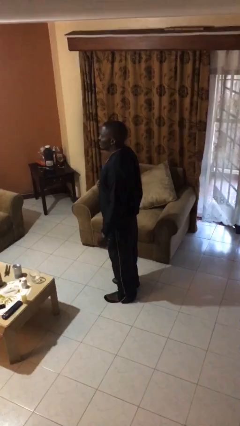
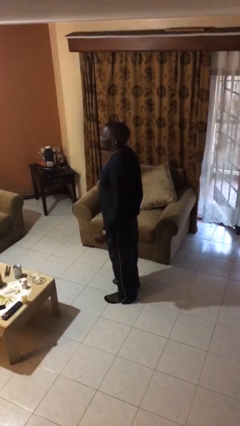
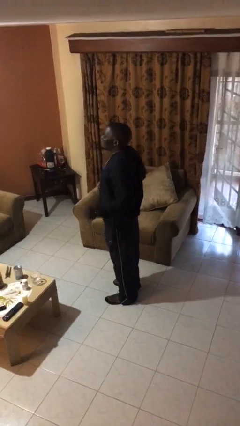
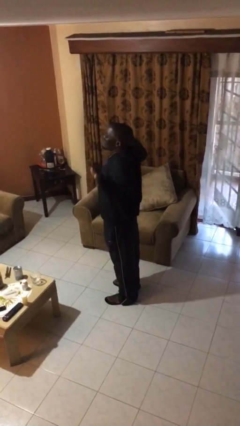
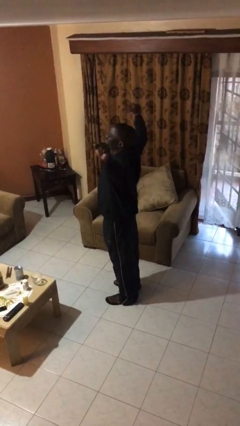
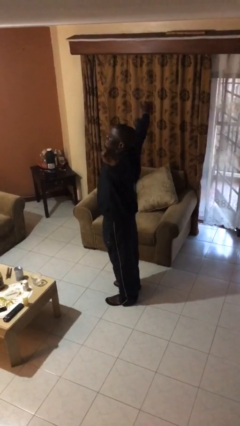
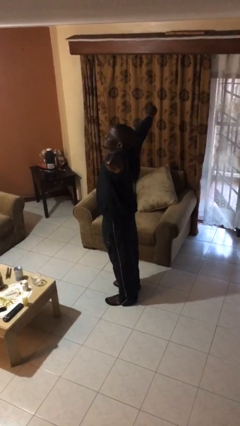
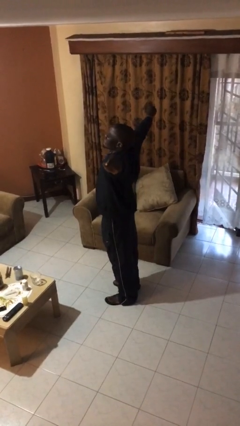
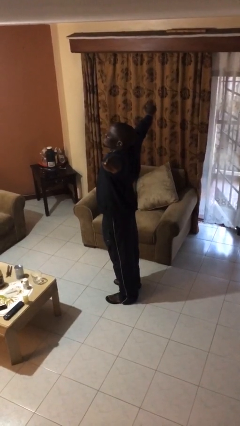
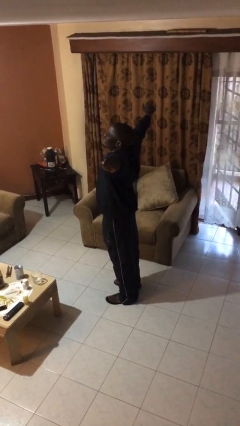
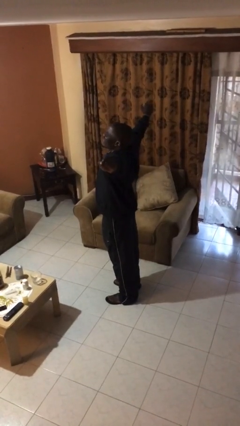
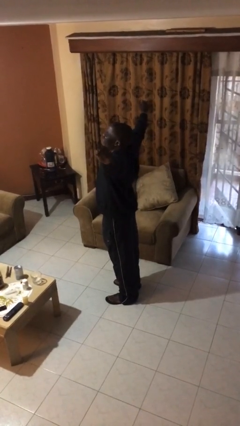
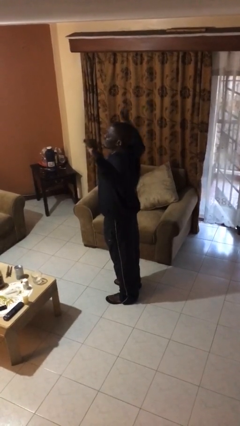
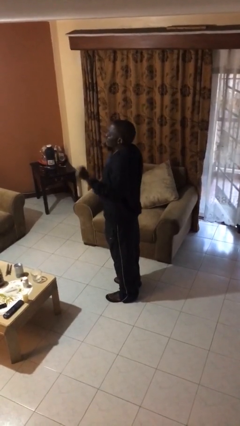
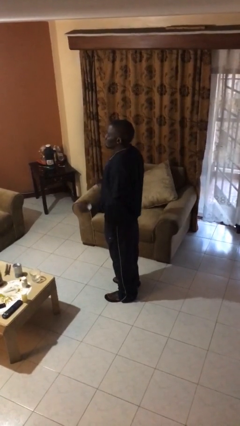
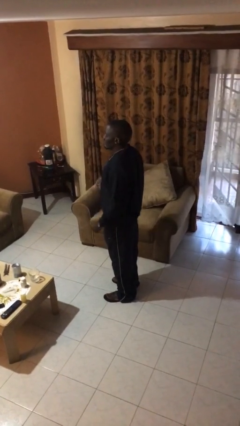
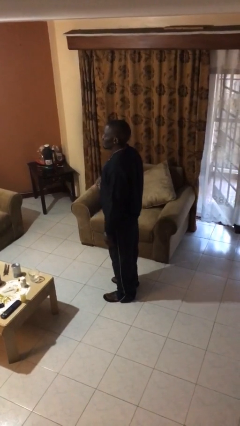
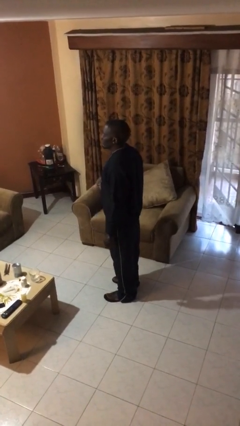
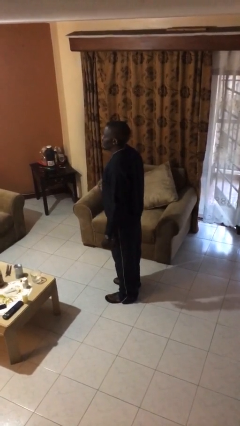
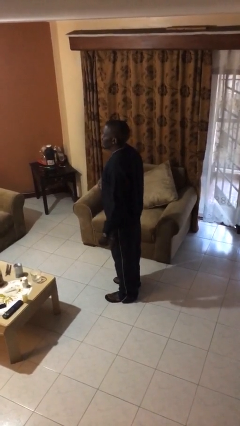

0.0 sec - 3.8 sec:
person stretches arms to side

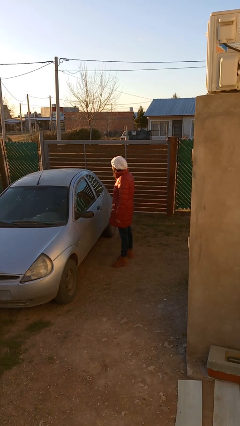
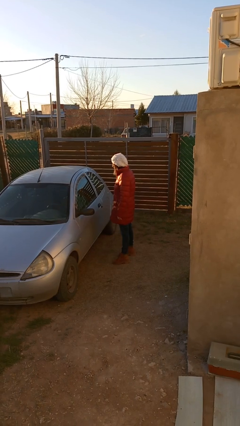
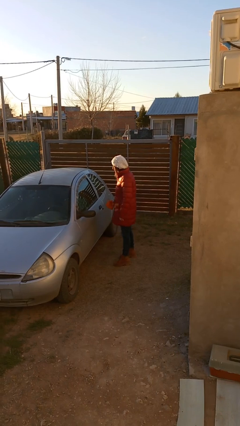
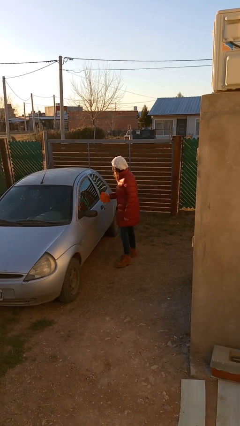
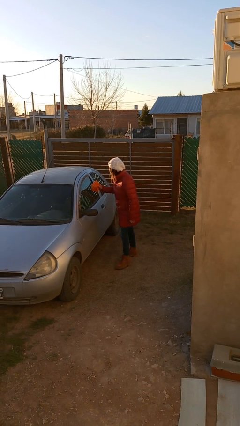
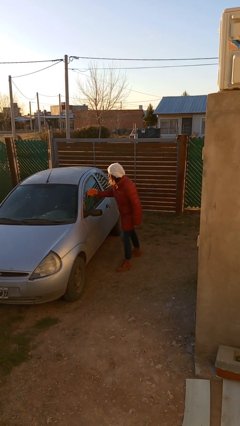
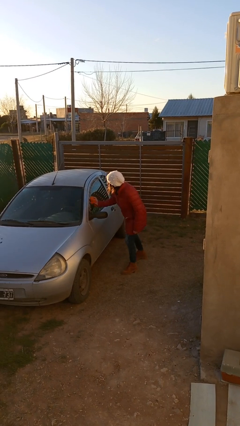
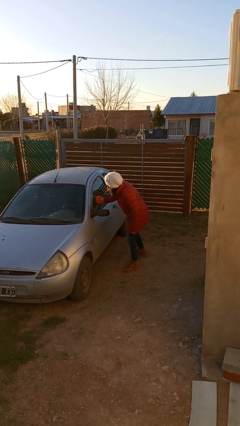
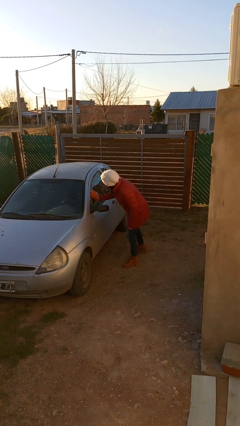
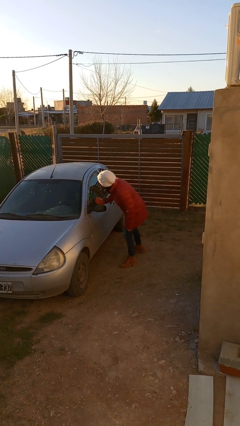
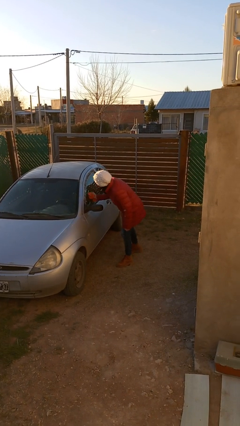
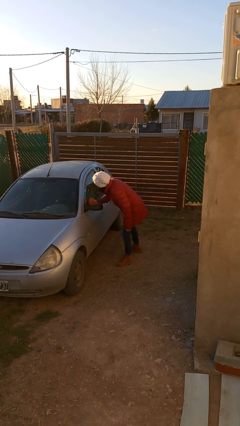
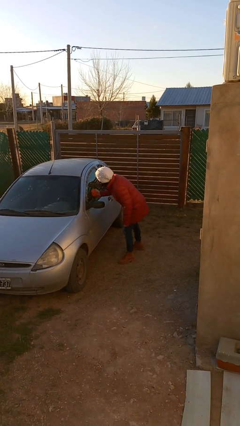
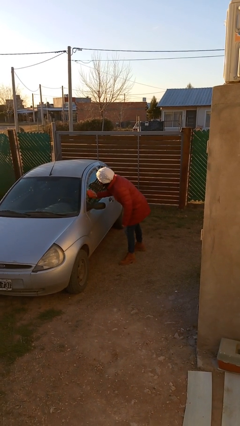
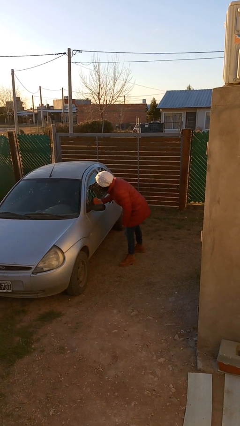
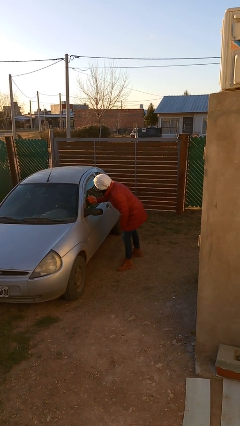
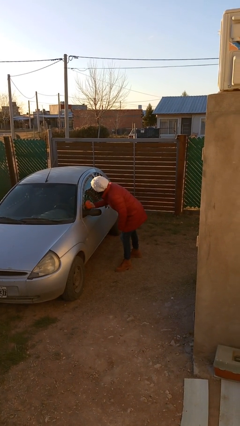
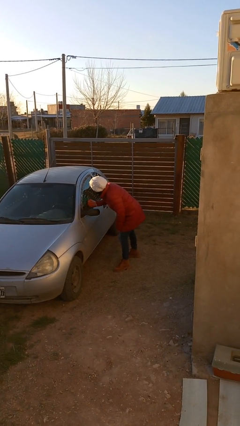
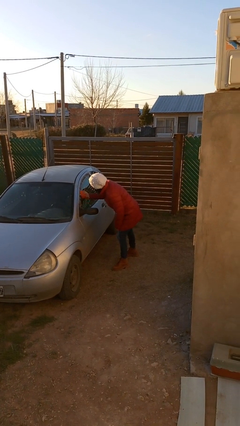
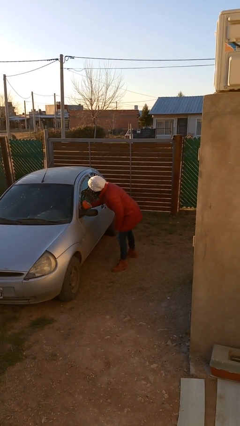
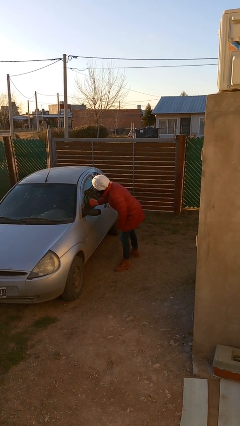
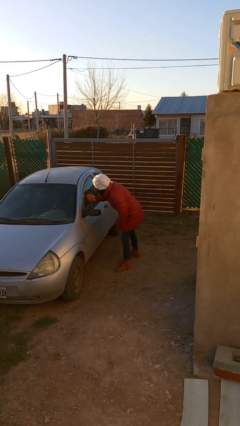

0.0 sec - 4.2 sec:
person polishes car with rag

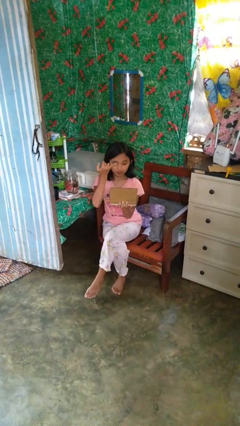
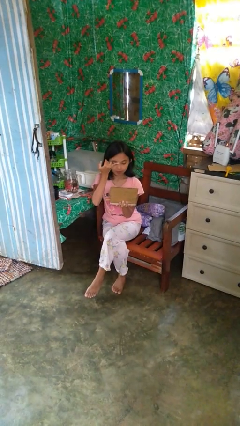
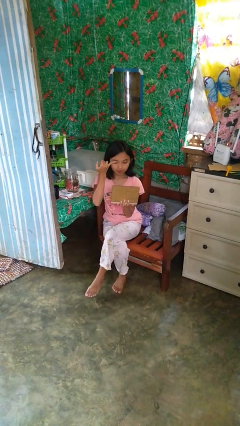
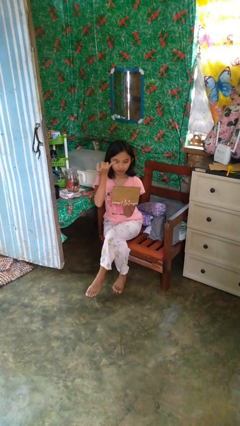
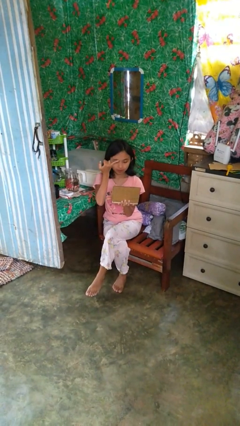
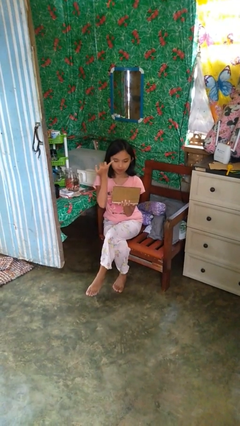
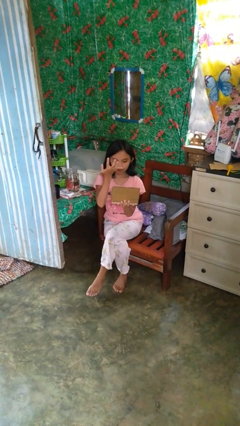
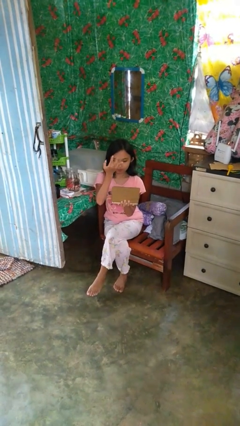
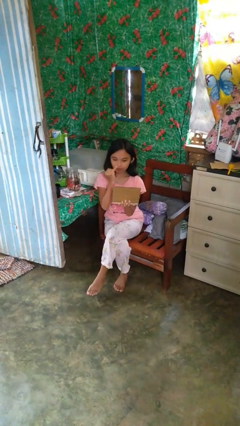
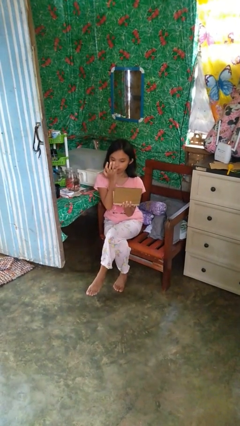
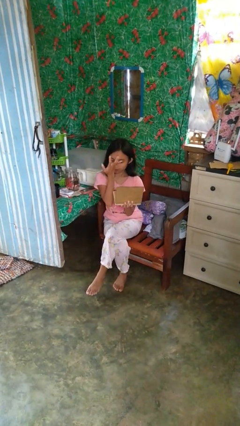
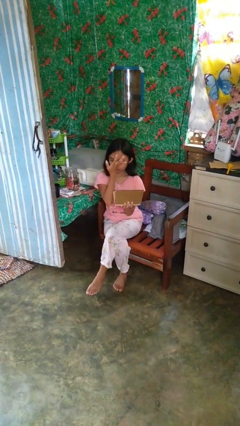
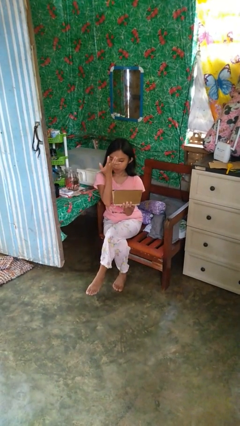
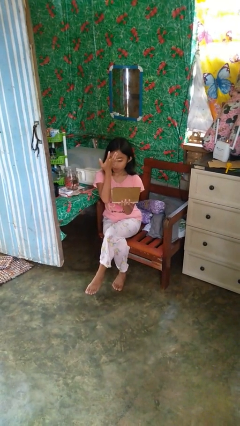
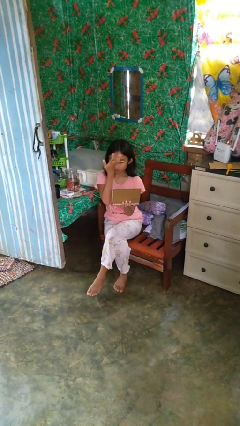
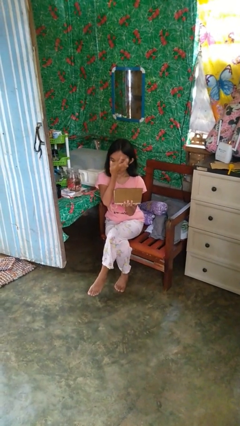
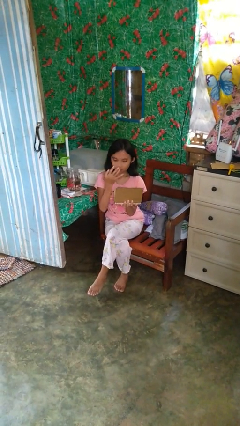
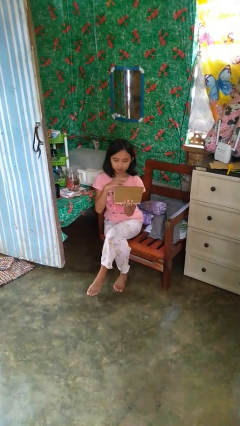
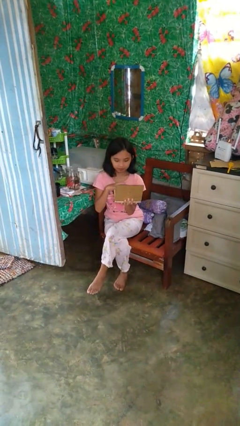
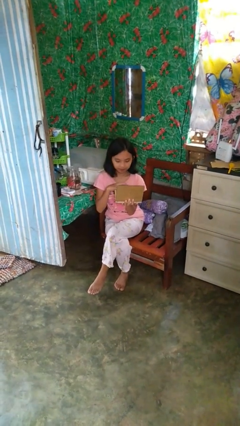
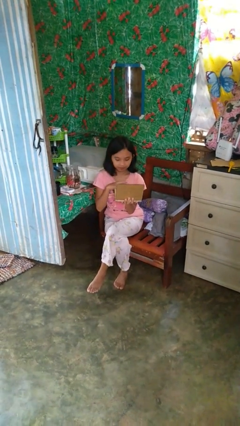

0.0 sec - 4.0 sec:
person applies eye makeup

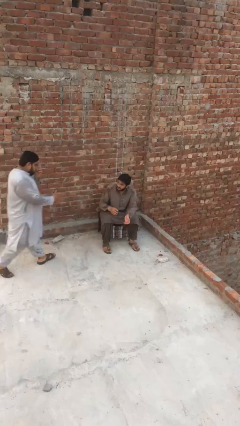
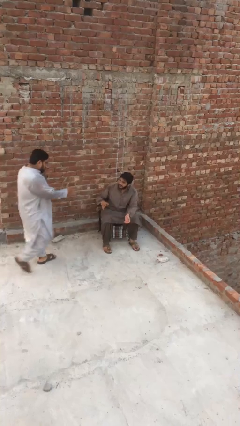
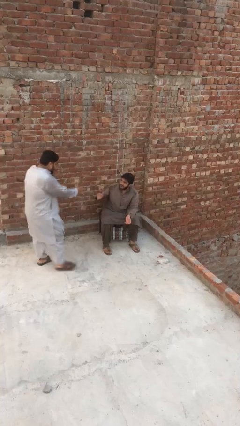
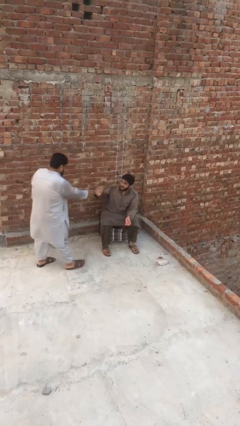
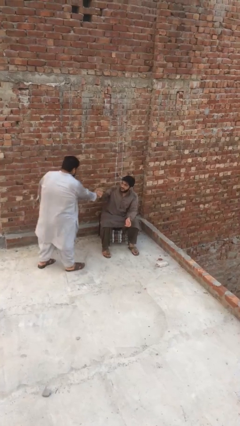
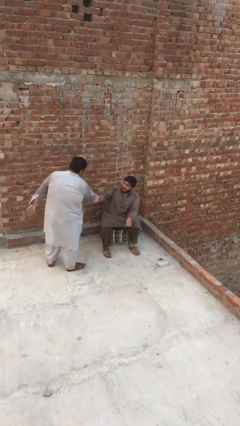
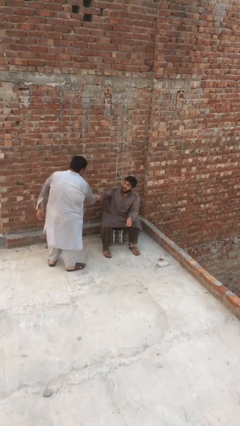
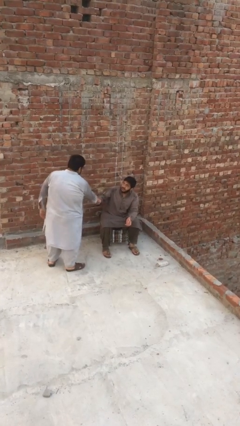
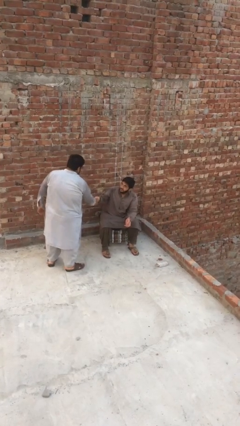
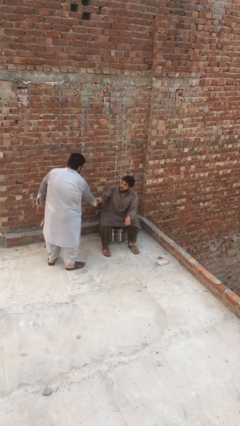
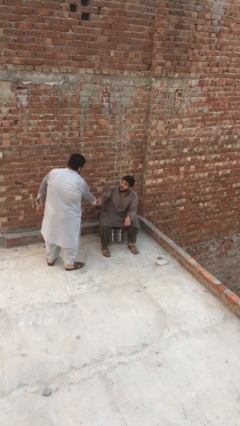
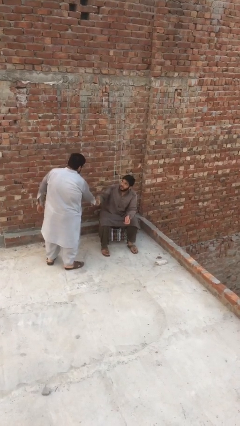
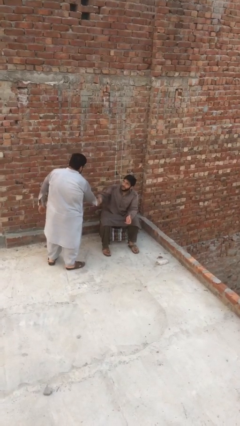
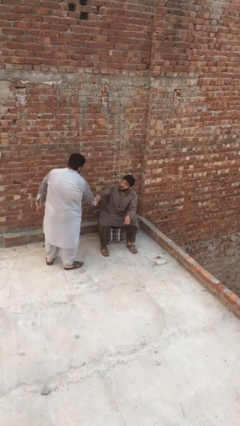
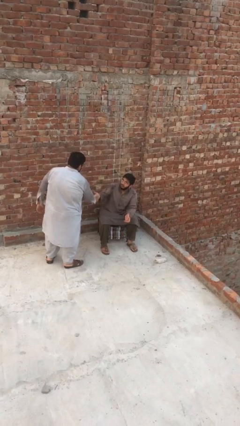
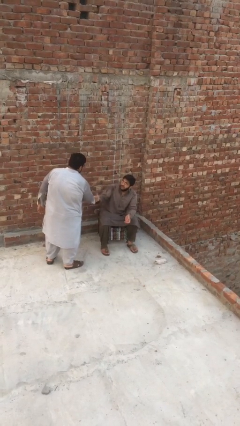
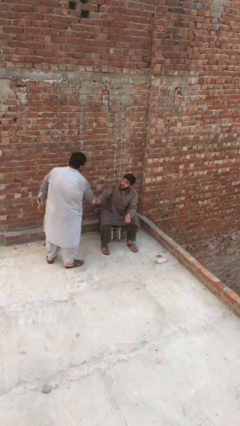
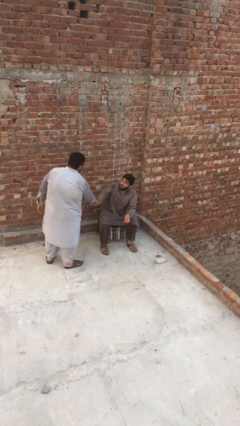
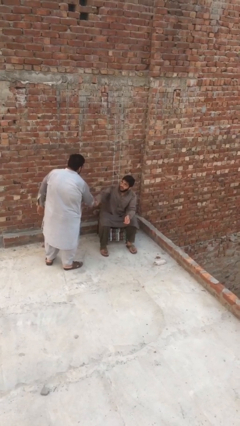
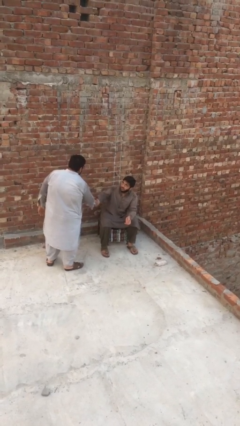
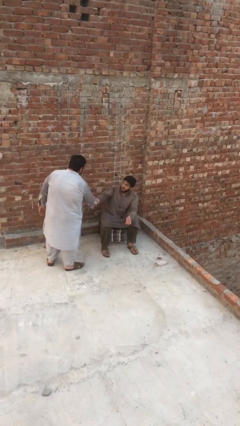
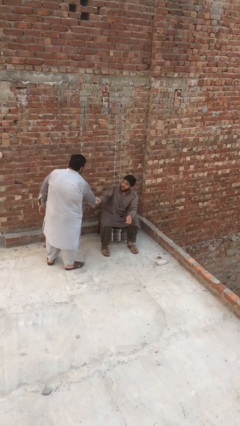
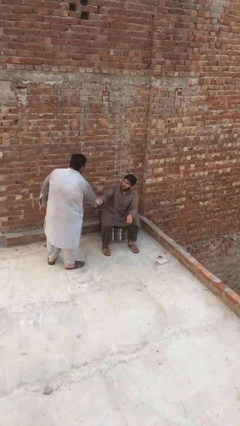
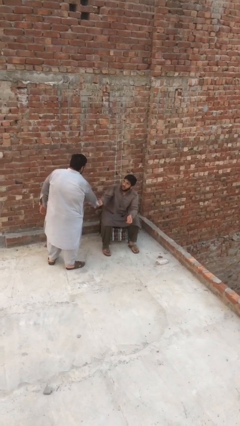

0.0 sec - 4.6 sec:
person shakes hand

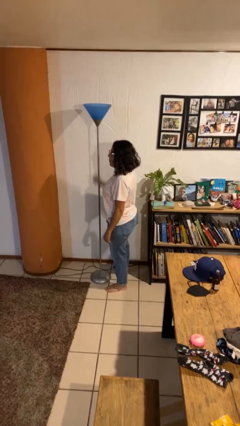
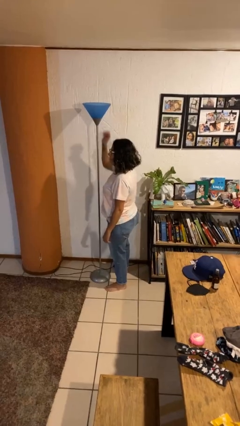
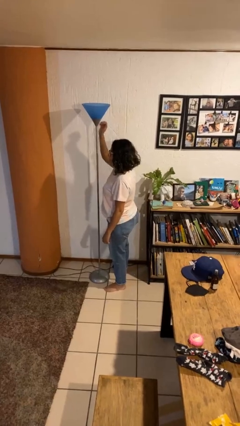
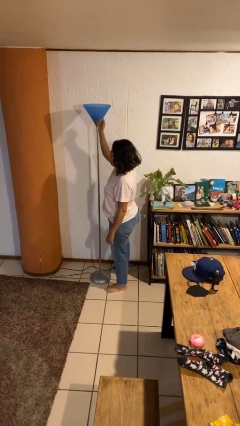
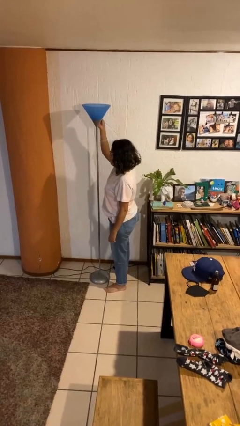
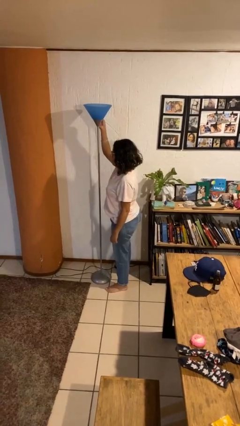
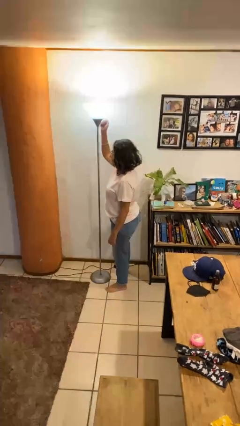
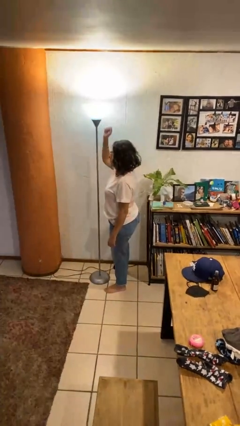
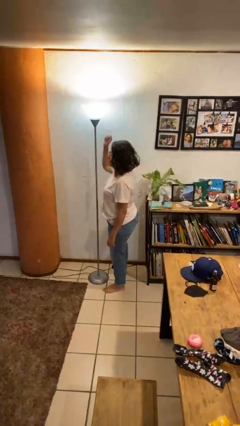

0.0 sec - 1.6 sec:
person turns on lamp
